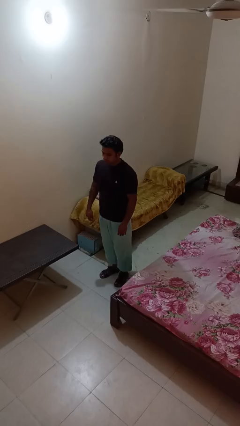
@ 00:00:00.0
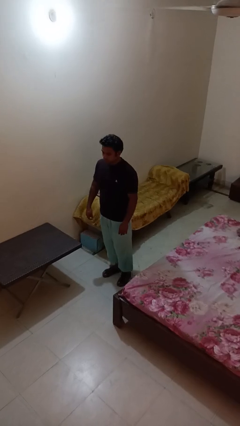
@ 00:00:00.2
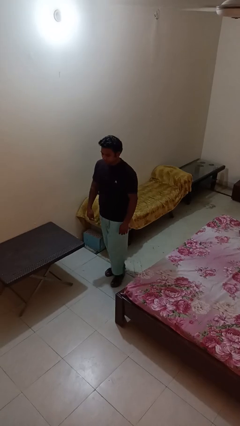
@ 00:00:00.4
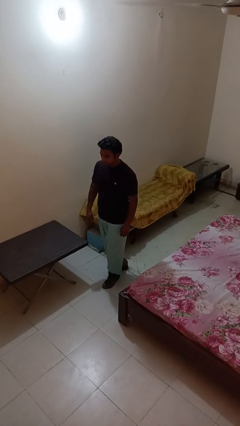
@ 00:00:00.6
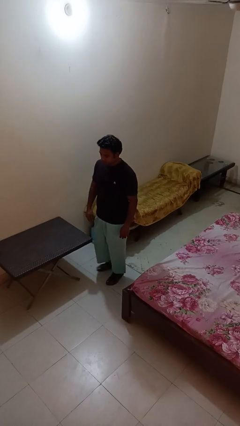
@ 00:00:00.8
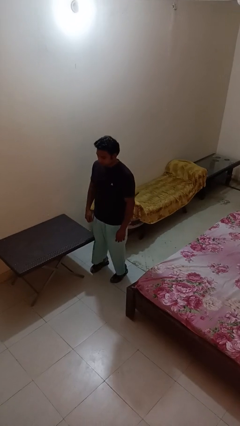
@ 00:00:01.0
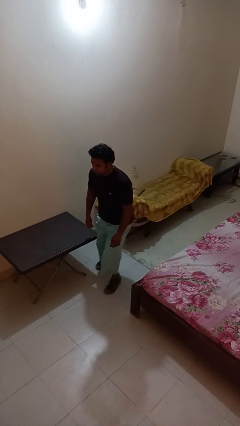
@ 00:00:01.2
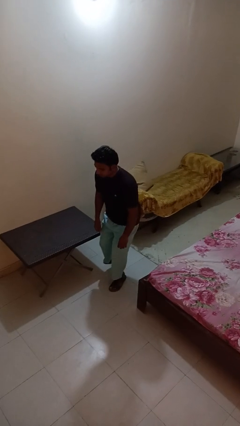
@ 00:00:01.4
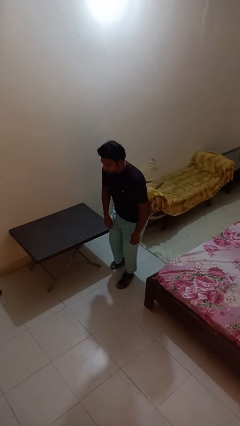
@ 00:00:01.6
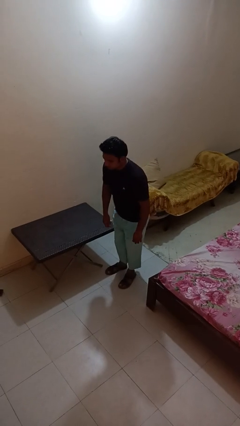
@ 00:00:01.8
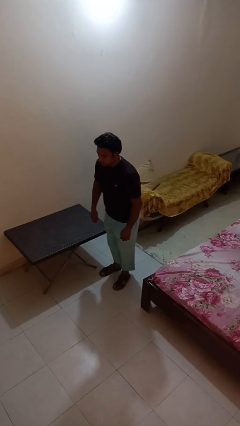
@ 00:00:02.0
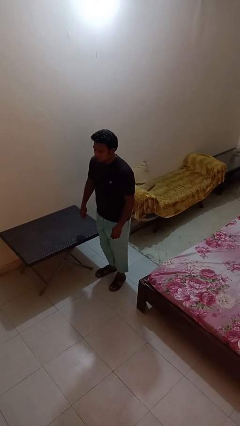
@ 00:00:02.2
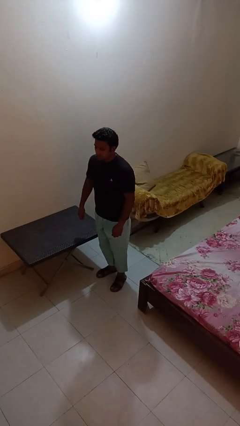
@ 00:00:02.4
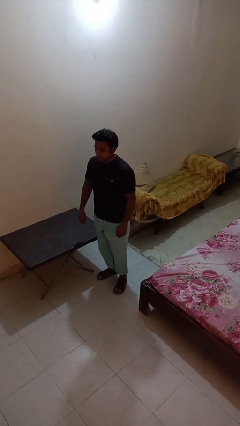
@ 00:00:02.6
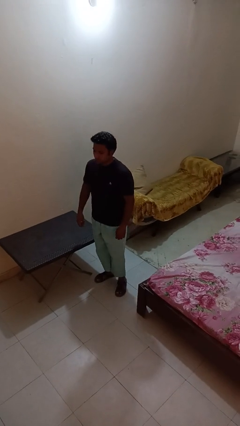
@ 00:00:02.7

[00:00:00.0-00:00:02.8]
person bumps into table

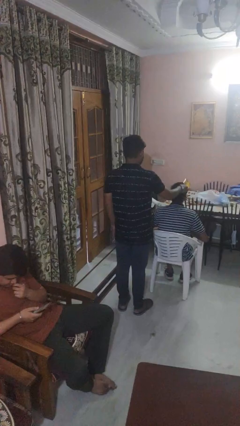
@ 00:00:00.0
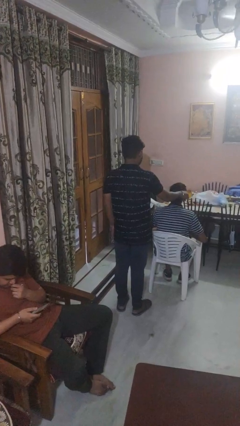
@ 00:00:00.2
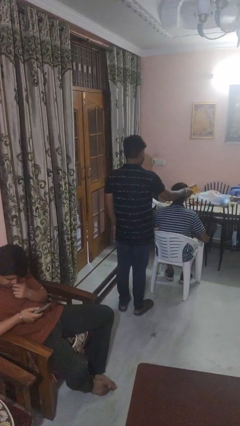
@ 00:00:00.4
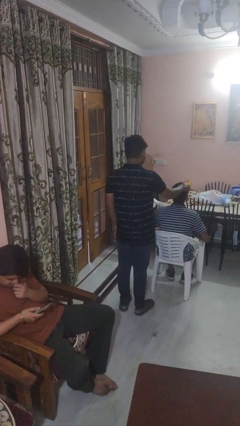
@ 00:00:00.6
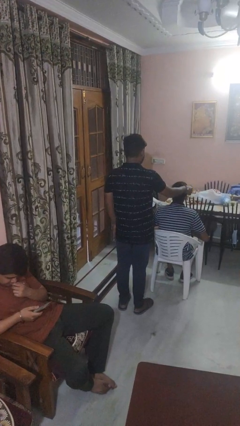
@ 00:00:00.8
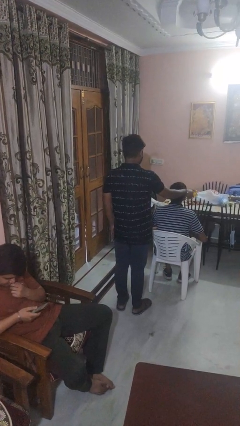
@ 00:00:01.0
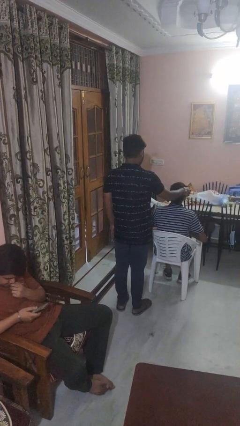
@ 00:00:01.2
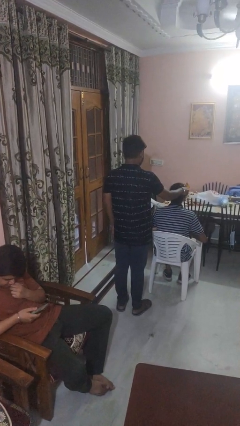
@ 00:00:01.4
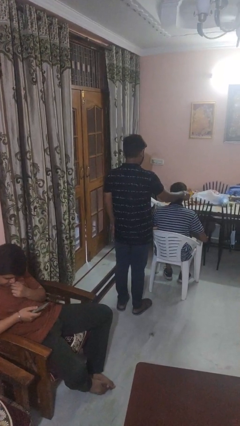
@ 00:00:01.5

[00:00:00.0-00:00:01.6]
person brushes hair of person

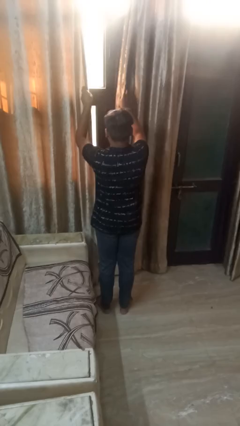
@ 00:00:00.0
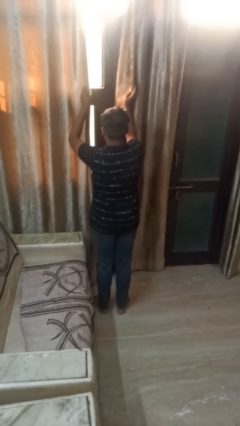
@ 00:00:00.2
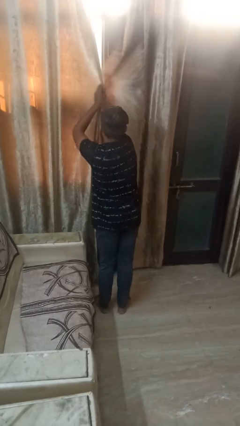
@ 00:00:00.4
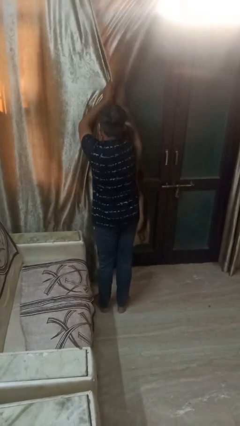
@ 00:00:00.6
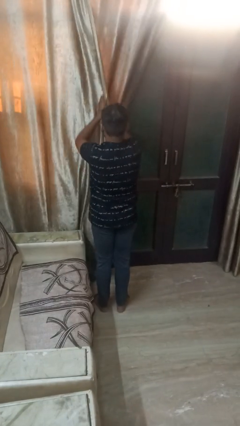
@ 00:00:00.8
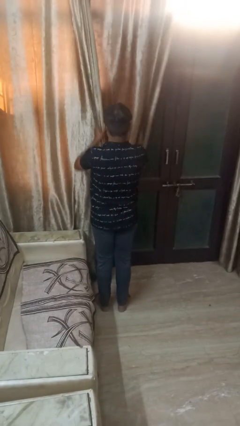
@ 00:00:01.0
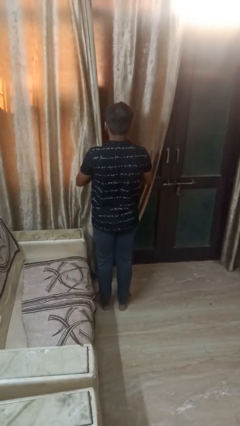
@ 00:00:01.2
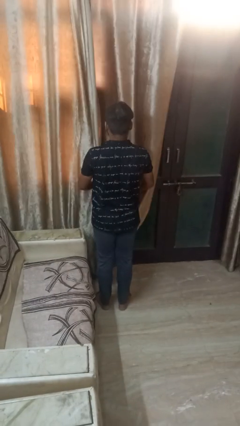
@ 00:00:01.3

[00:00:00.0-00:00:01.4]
person closes curtains

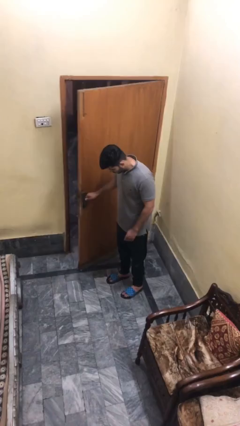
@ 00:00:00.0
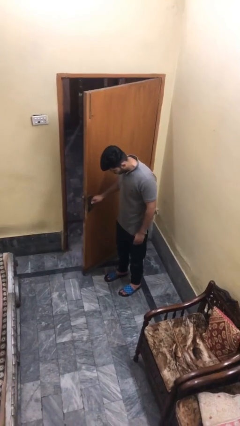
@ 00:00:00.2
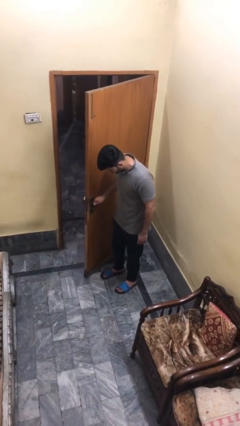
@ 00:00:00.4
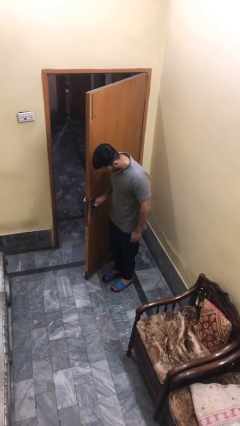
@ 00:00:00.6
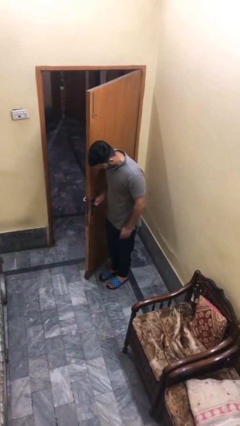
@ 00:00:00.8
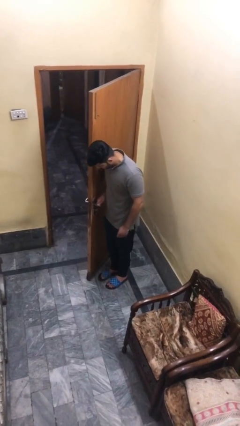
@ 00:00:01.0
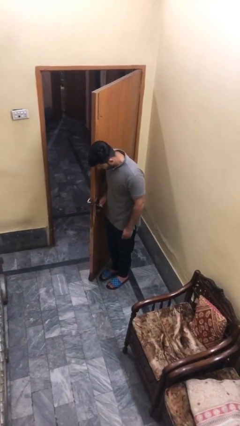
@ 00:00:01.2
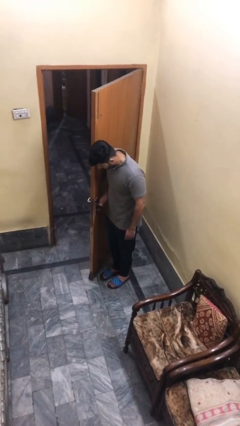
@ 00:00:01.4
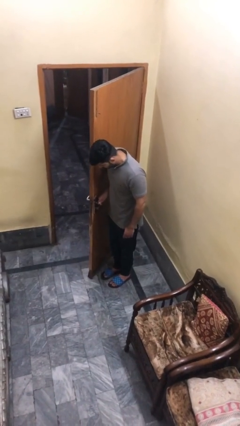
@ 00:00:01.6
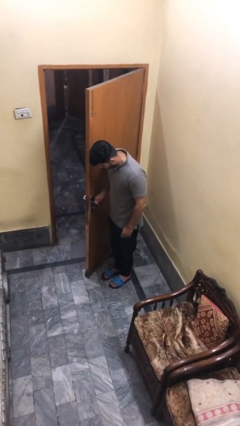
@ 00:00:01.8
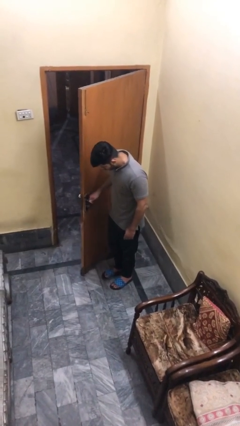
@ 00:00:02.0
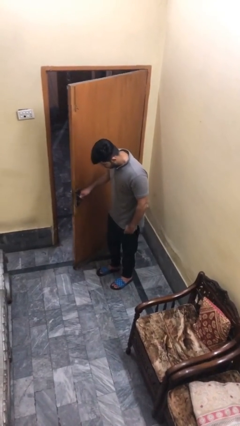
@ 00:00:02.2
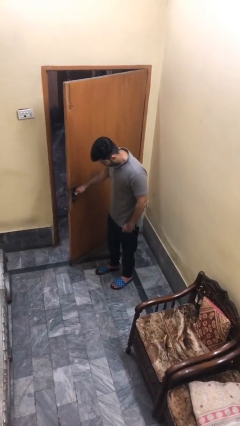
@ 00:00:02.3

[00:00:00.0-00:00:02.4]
person opens facility door

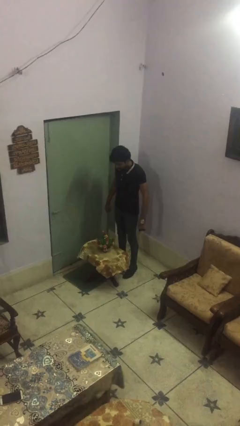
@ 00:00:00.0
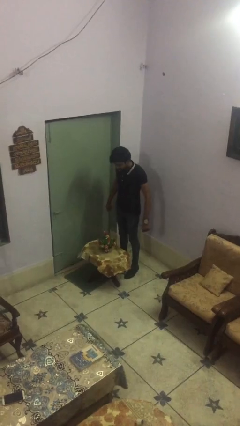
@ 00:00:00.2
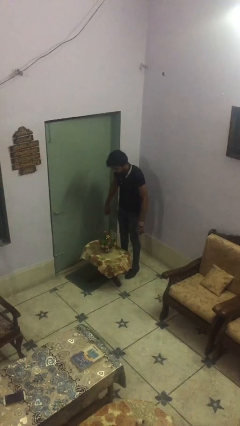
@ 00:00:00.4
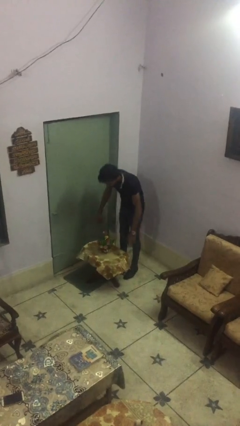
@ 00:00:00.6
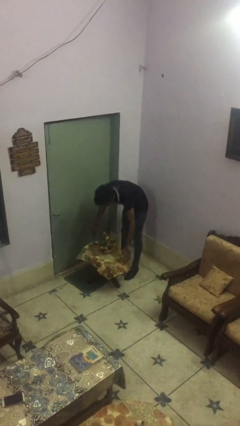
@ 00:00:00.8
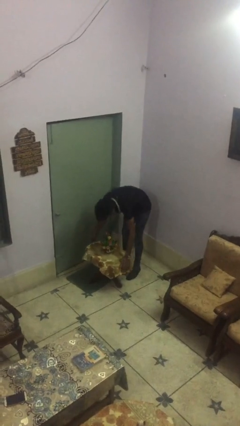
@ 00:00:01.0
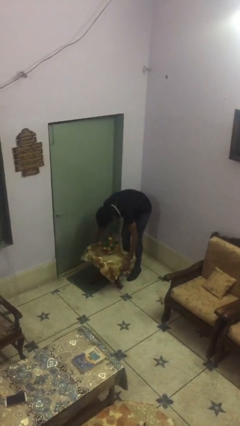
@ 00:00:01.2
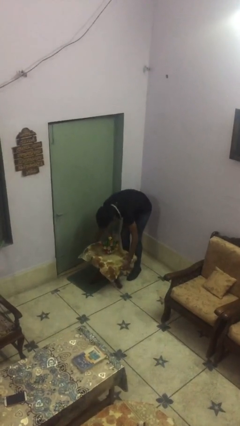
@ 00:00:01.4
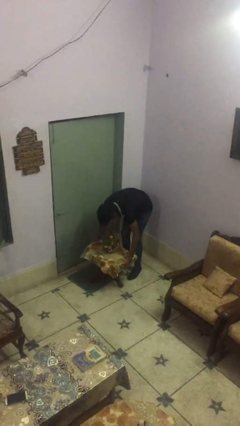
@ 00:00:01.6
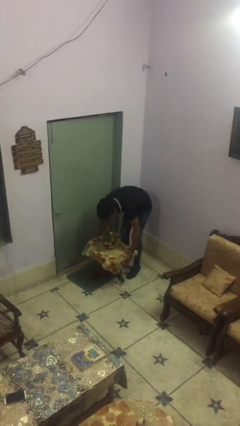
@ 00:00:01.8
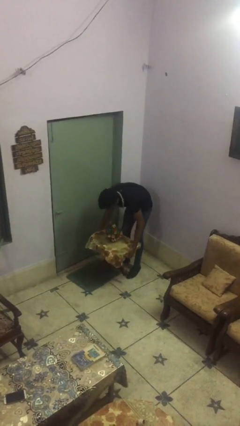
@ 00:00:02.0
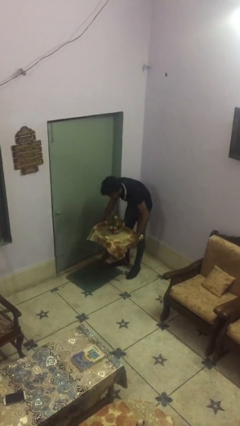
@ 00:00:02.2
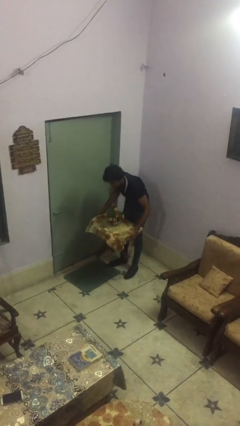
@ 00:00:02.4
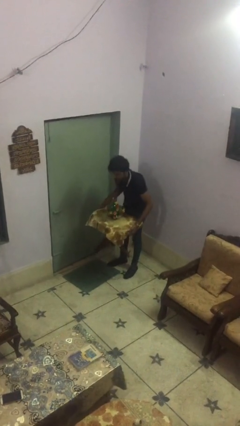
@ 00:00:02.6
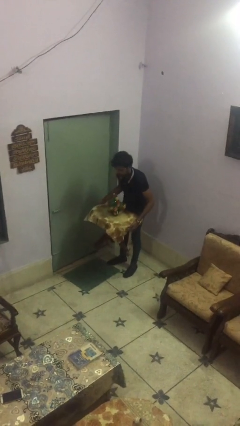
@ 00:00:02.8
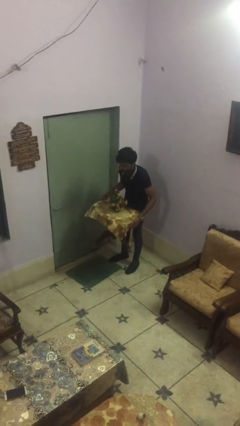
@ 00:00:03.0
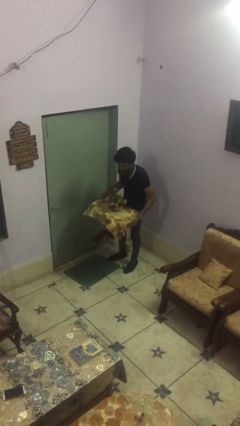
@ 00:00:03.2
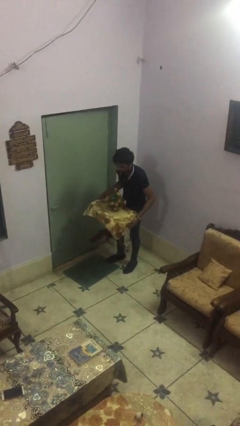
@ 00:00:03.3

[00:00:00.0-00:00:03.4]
person picks up object from floor

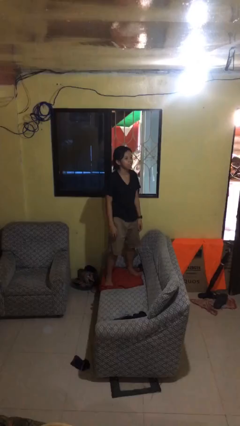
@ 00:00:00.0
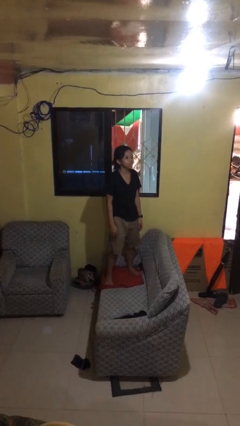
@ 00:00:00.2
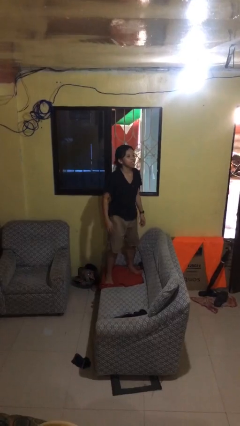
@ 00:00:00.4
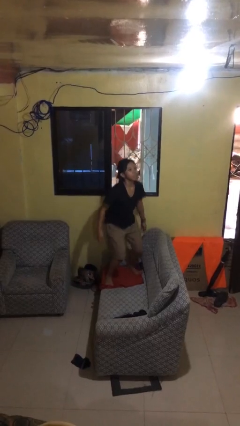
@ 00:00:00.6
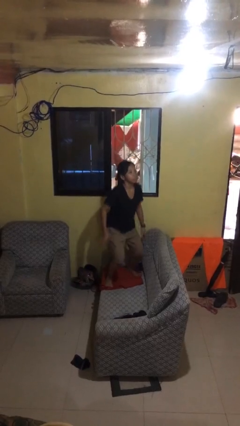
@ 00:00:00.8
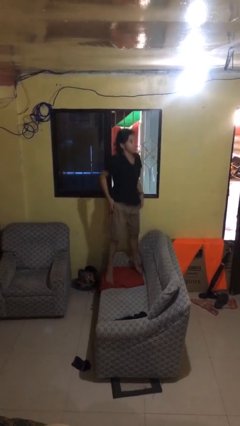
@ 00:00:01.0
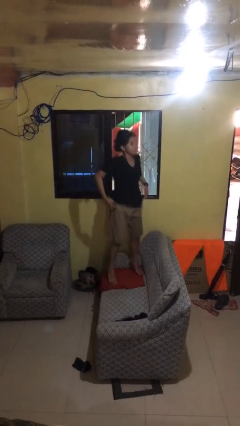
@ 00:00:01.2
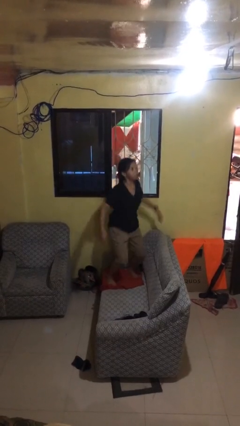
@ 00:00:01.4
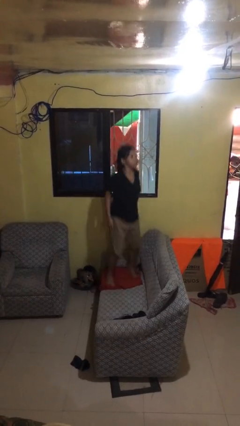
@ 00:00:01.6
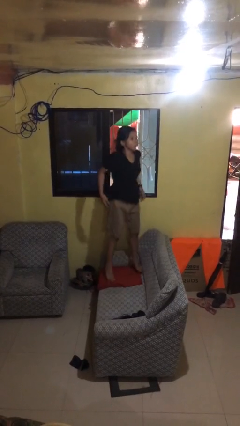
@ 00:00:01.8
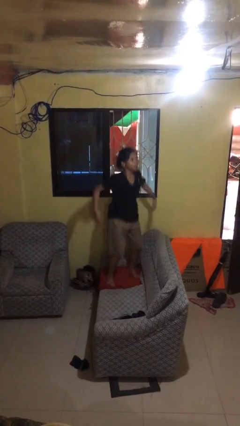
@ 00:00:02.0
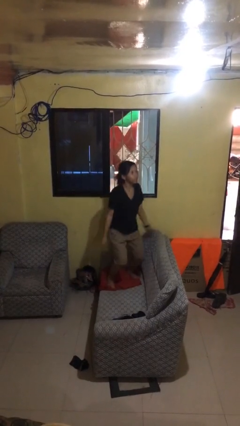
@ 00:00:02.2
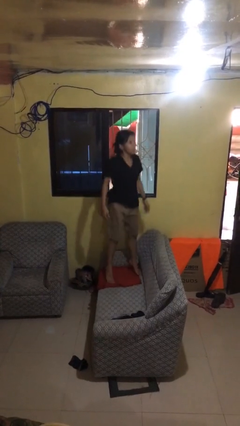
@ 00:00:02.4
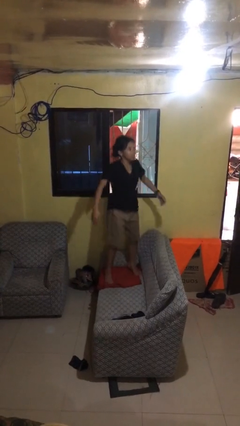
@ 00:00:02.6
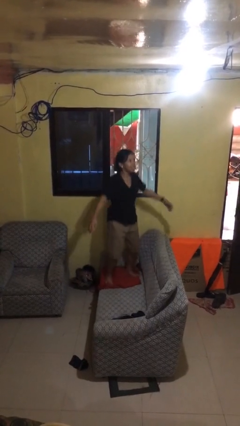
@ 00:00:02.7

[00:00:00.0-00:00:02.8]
person jumps on couch

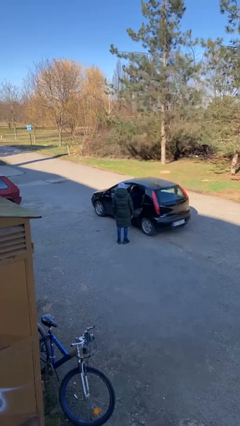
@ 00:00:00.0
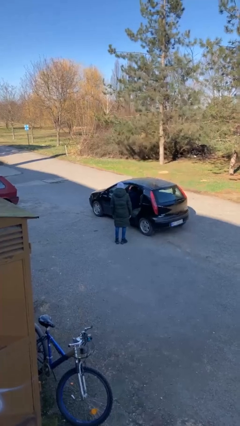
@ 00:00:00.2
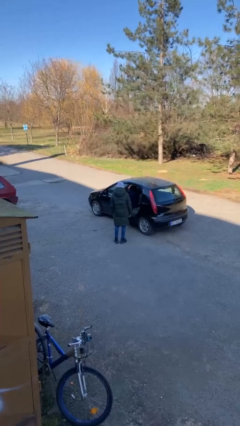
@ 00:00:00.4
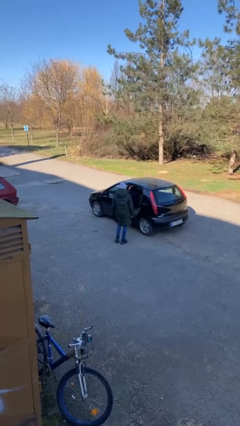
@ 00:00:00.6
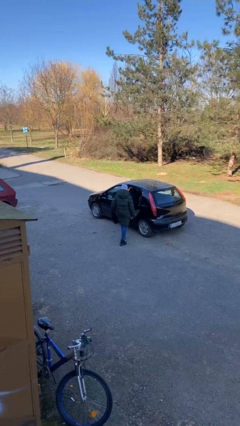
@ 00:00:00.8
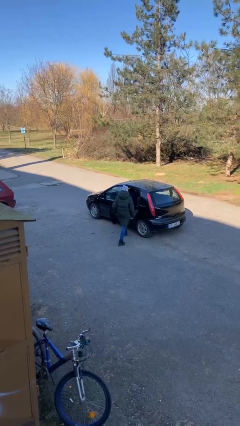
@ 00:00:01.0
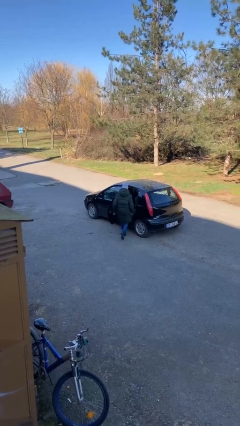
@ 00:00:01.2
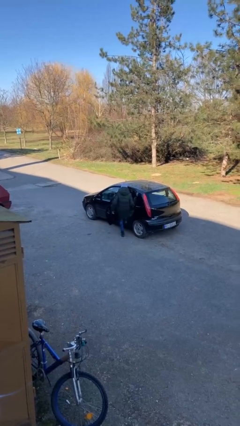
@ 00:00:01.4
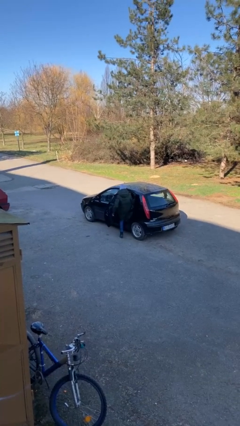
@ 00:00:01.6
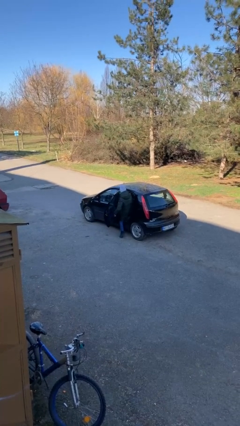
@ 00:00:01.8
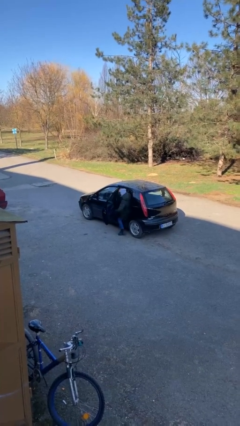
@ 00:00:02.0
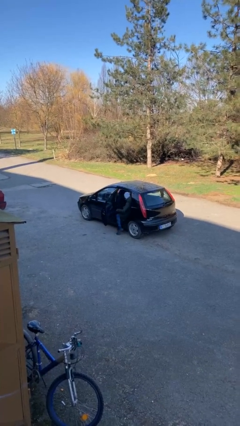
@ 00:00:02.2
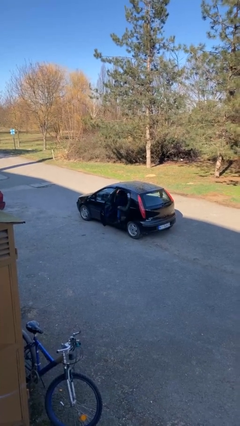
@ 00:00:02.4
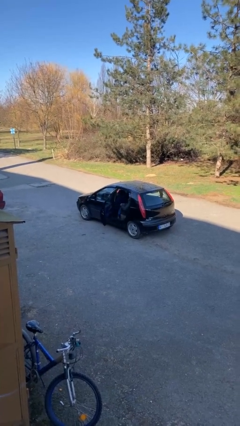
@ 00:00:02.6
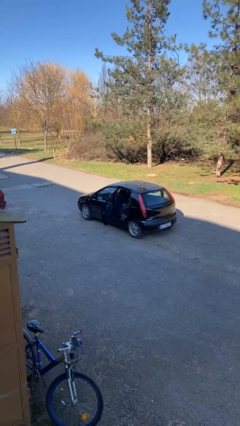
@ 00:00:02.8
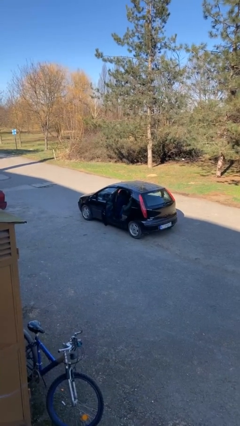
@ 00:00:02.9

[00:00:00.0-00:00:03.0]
person enters car
